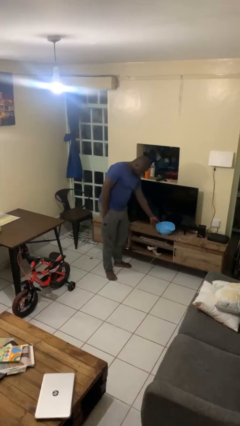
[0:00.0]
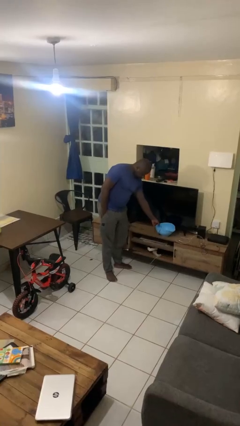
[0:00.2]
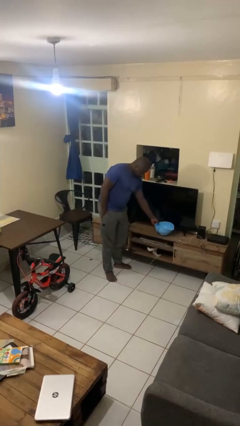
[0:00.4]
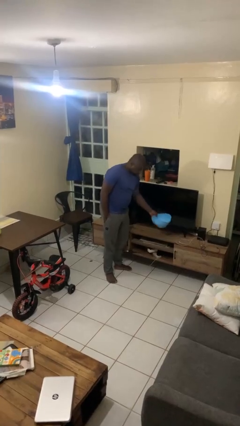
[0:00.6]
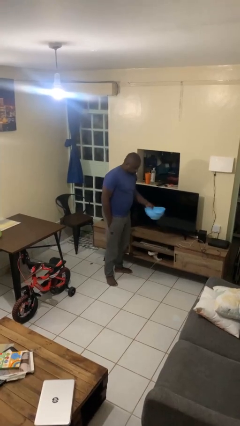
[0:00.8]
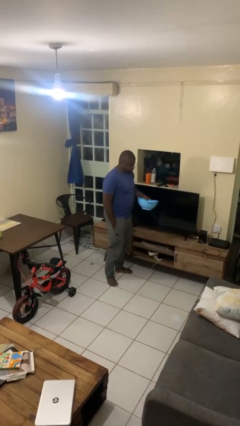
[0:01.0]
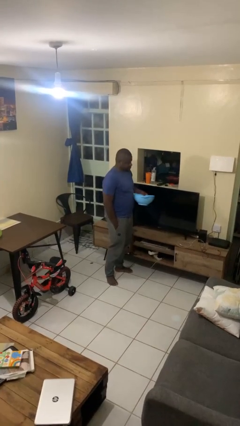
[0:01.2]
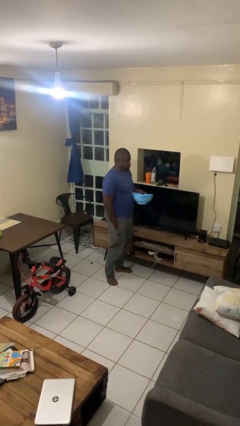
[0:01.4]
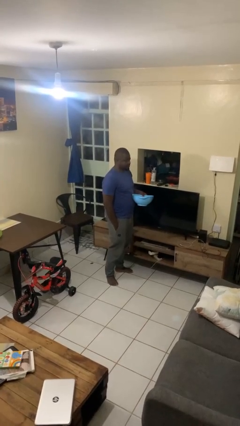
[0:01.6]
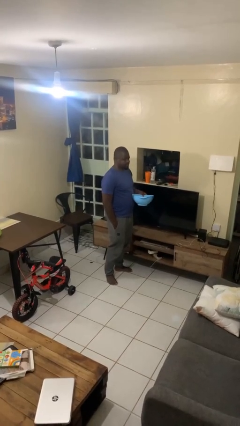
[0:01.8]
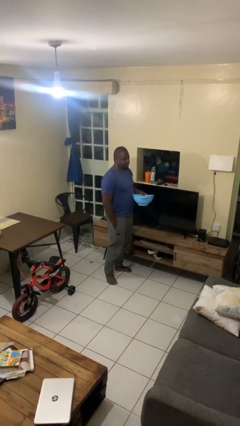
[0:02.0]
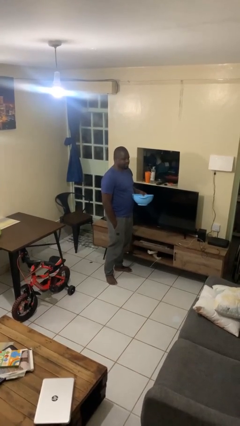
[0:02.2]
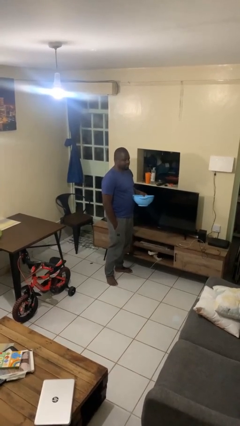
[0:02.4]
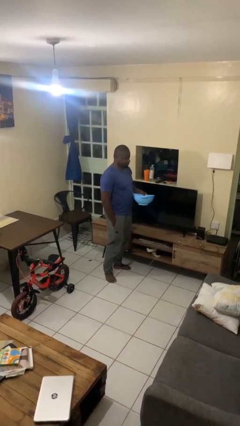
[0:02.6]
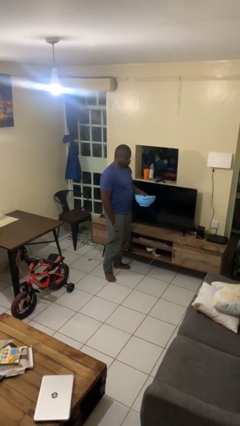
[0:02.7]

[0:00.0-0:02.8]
person picks up object from countertop

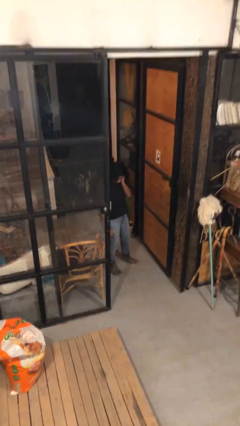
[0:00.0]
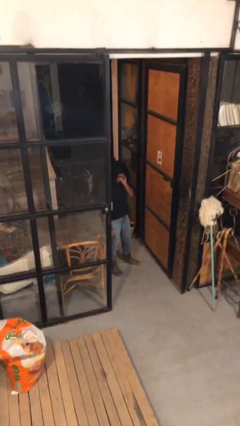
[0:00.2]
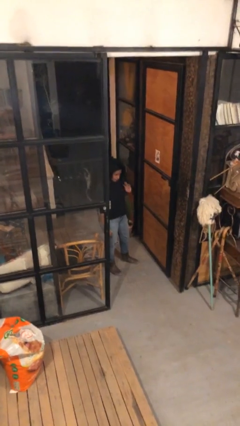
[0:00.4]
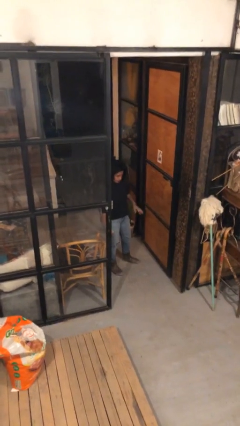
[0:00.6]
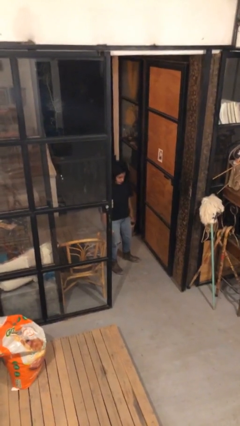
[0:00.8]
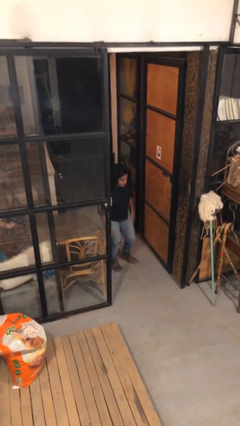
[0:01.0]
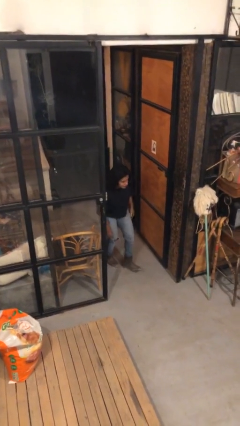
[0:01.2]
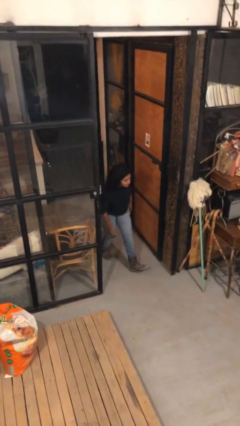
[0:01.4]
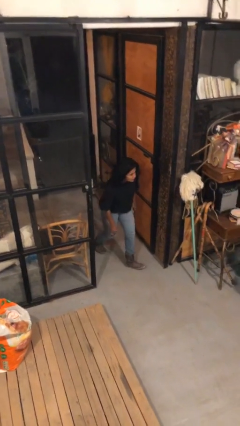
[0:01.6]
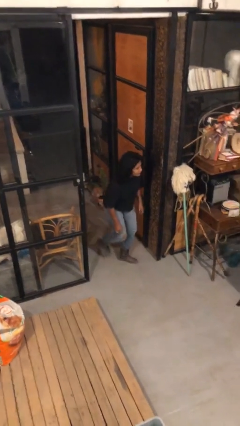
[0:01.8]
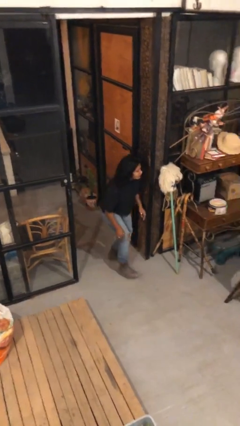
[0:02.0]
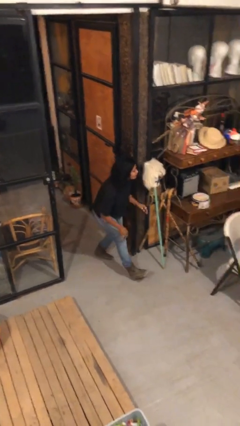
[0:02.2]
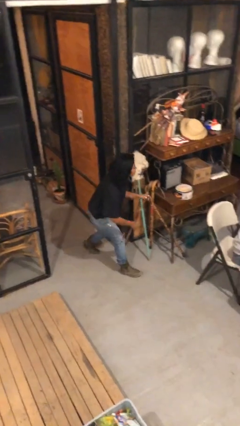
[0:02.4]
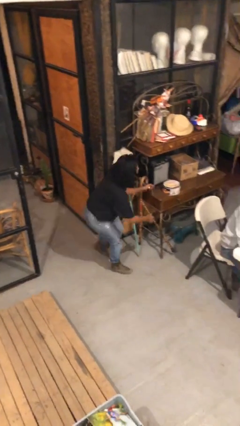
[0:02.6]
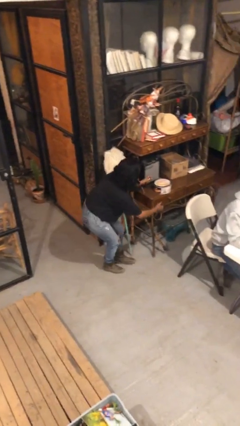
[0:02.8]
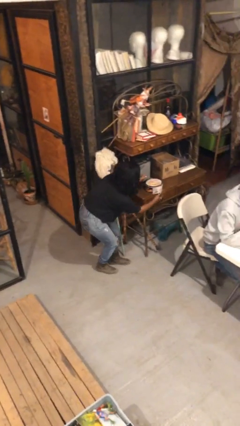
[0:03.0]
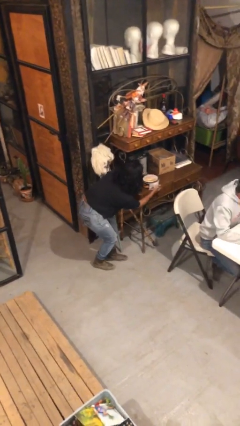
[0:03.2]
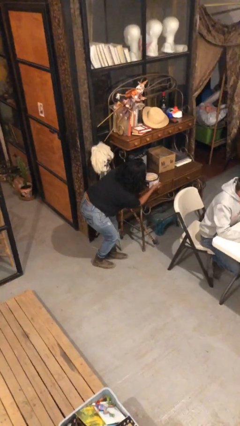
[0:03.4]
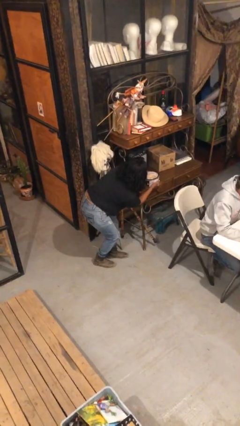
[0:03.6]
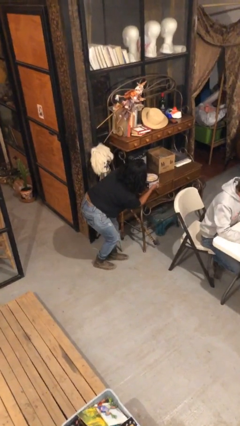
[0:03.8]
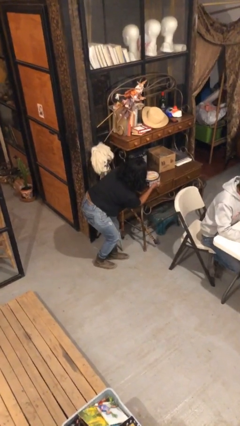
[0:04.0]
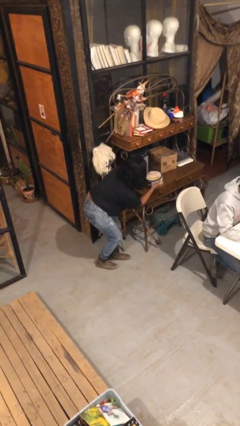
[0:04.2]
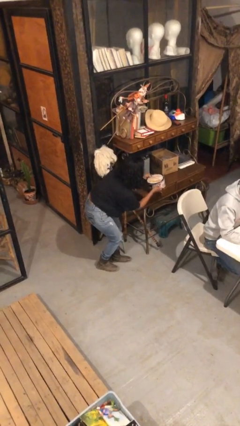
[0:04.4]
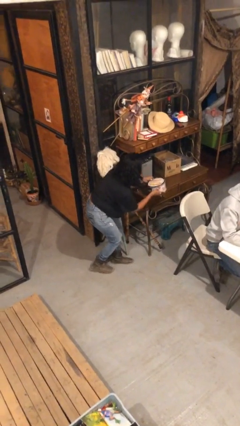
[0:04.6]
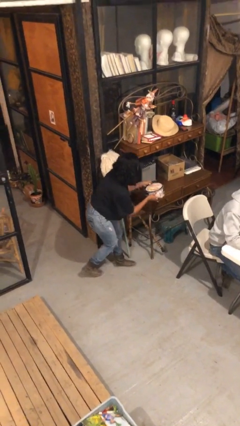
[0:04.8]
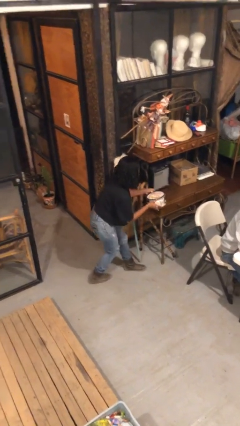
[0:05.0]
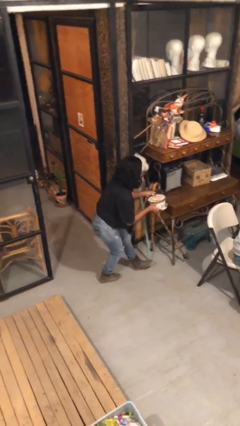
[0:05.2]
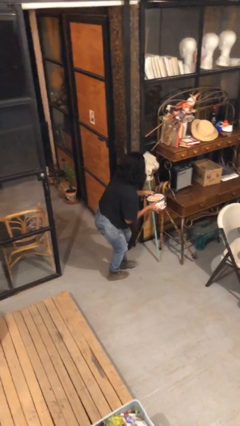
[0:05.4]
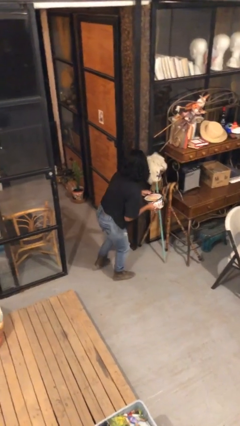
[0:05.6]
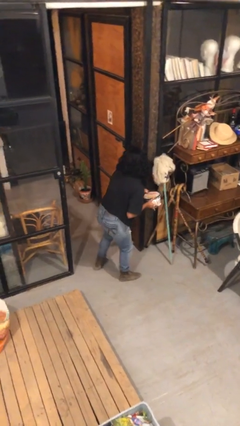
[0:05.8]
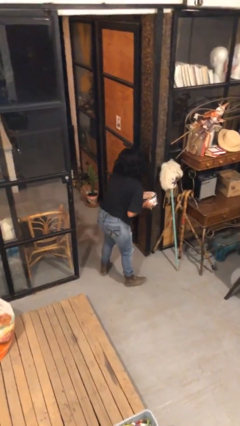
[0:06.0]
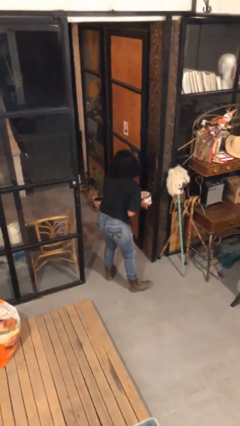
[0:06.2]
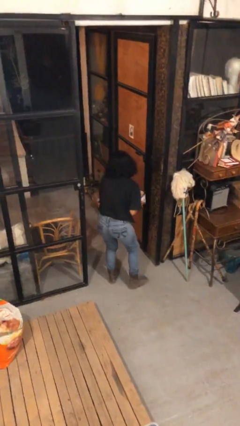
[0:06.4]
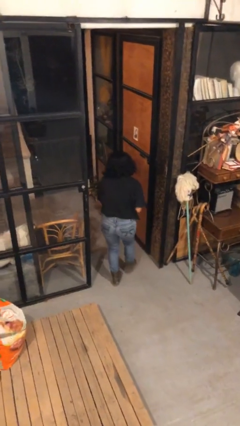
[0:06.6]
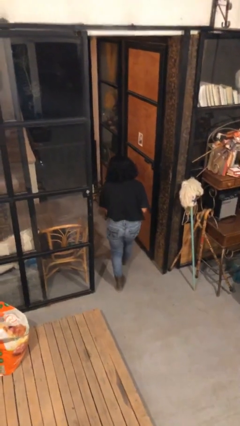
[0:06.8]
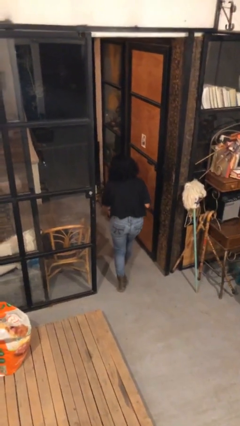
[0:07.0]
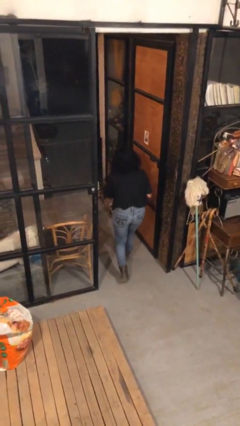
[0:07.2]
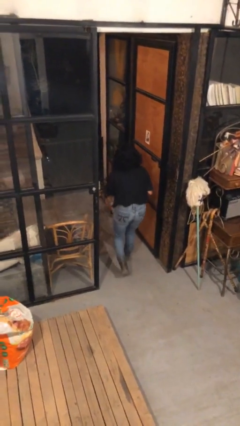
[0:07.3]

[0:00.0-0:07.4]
person steals object from person

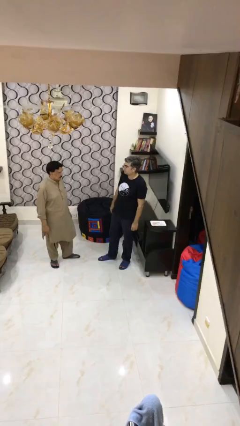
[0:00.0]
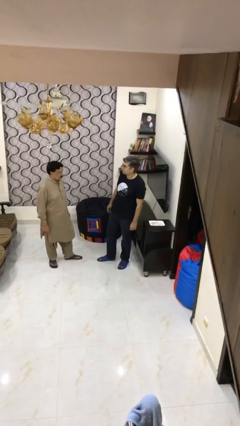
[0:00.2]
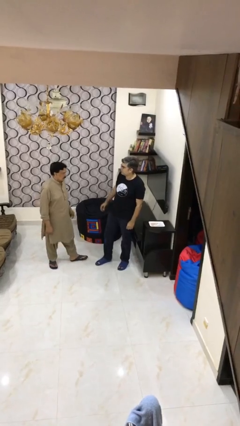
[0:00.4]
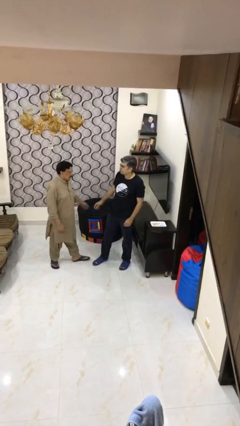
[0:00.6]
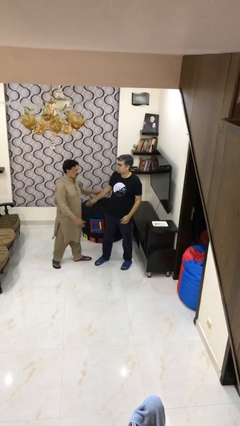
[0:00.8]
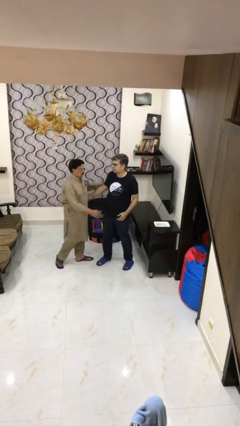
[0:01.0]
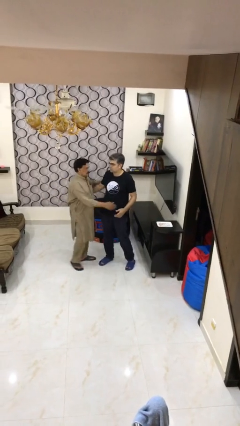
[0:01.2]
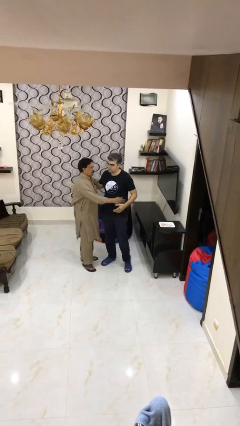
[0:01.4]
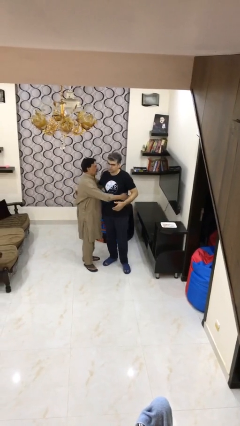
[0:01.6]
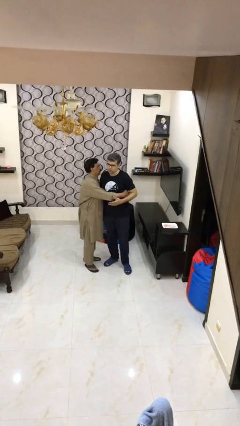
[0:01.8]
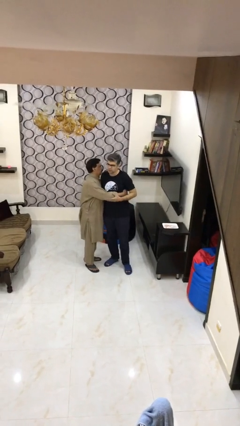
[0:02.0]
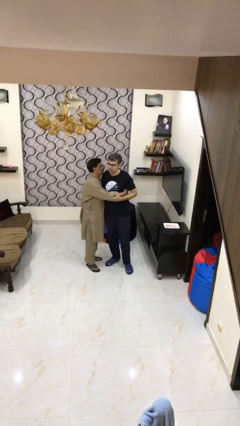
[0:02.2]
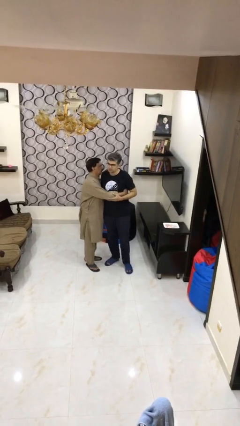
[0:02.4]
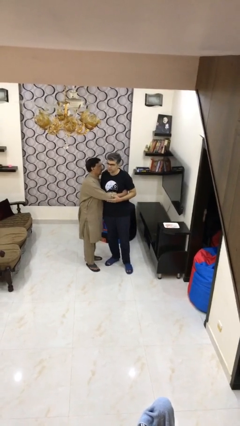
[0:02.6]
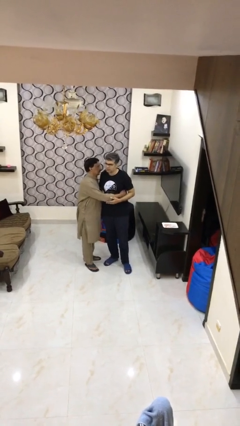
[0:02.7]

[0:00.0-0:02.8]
person embraces person

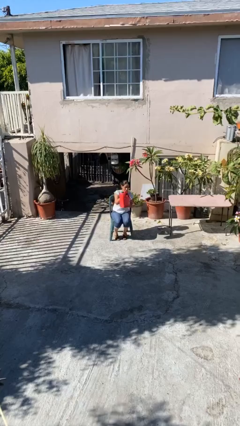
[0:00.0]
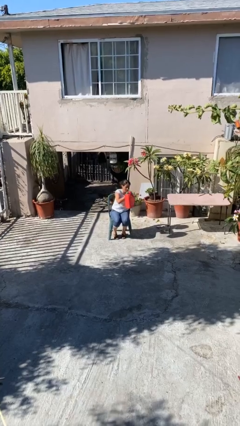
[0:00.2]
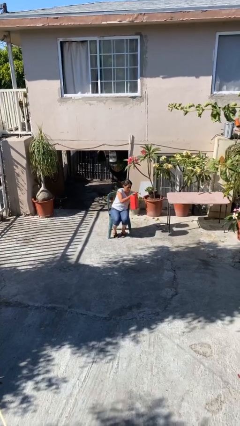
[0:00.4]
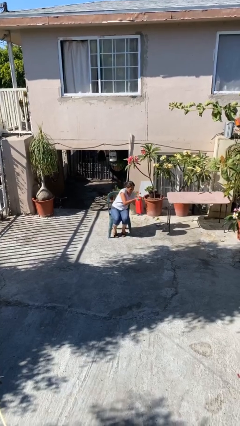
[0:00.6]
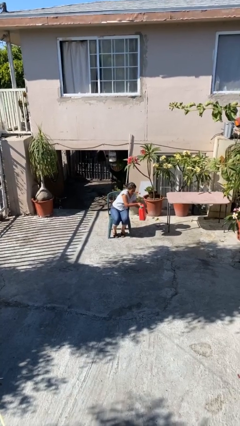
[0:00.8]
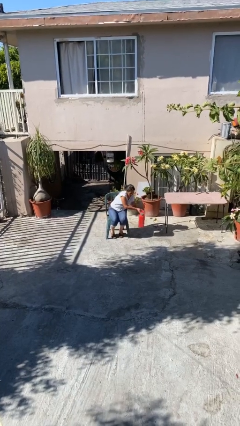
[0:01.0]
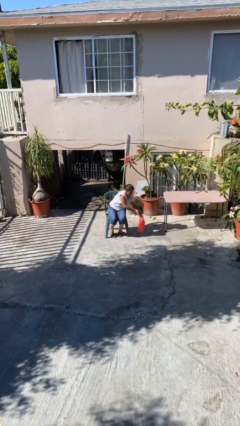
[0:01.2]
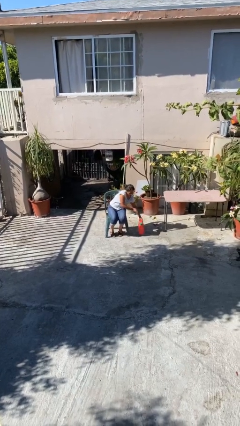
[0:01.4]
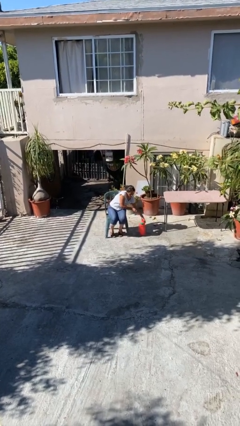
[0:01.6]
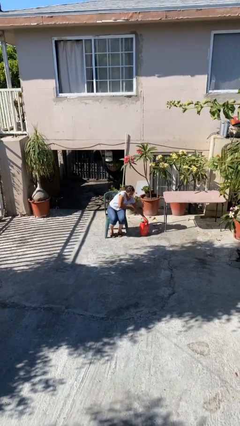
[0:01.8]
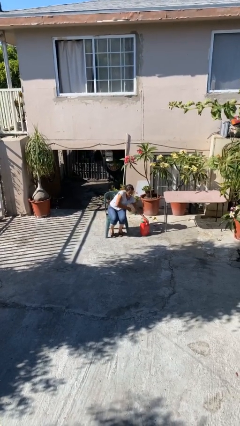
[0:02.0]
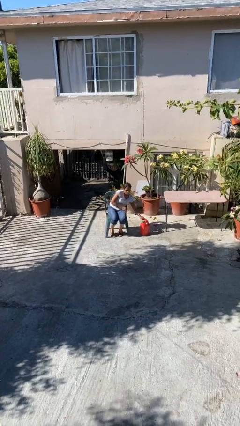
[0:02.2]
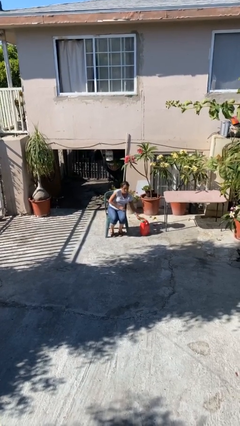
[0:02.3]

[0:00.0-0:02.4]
person puts down object on floor

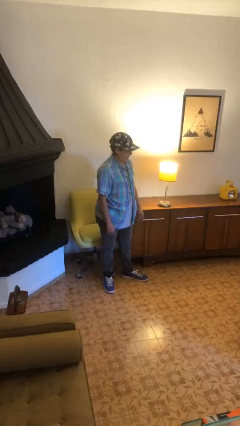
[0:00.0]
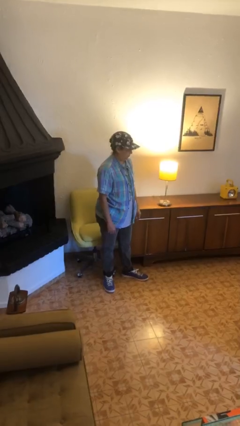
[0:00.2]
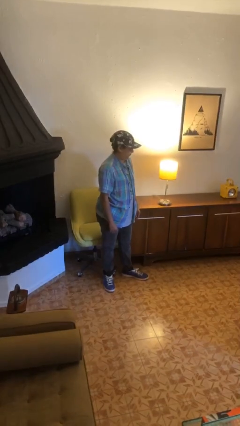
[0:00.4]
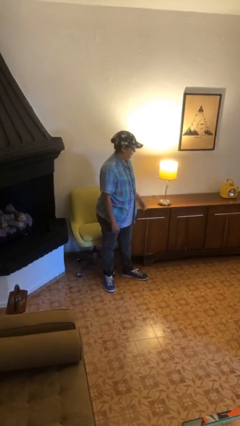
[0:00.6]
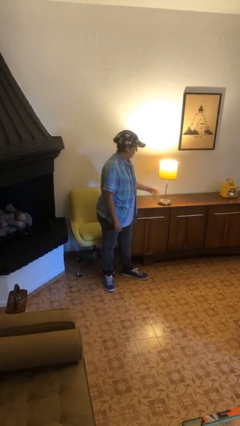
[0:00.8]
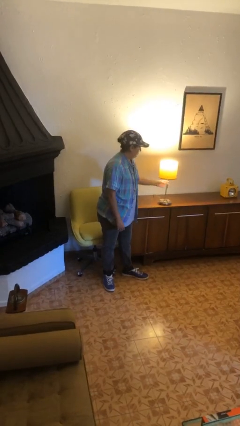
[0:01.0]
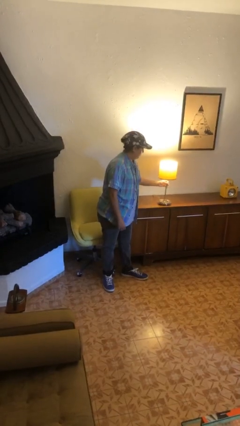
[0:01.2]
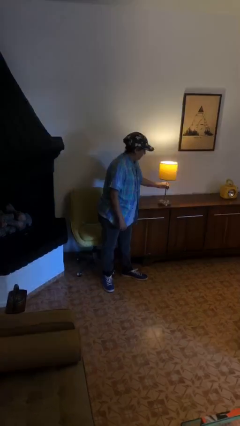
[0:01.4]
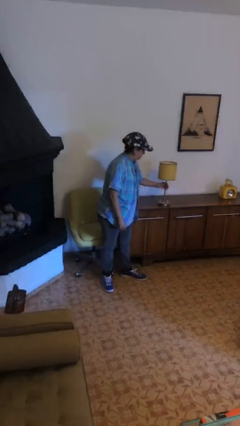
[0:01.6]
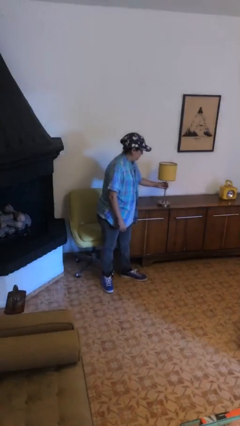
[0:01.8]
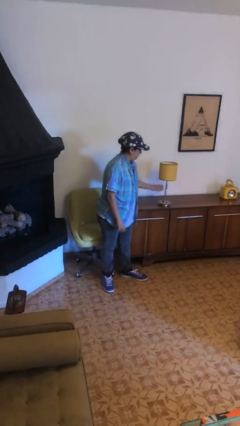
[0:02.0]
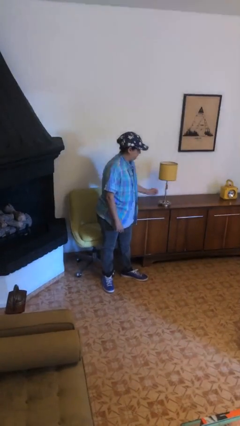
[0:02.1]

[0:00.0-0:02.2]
person turns off lamp
